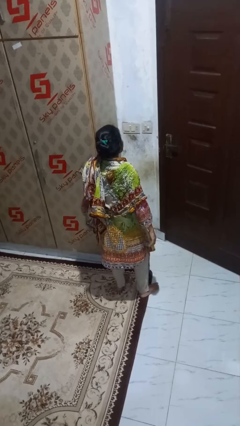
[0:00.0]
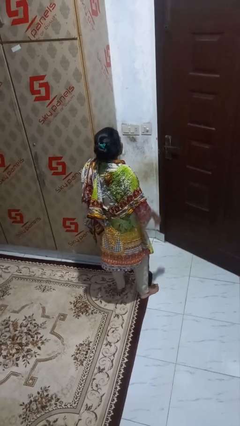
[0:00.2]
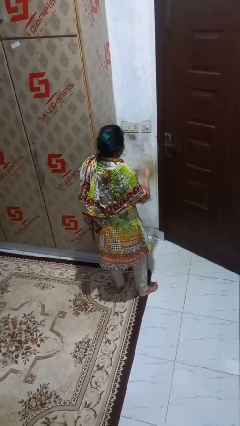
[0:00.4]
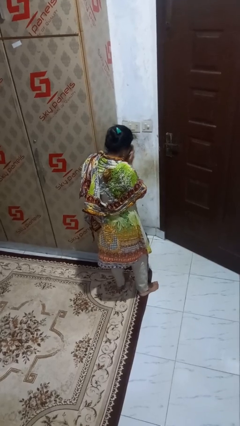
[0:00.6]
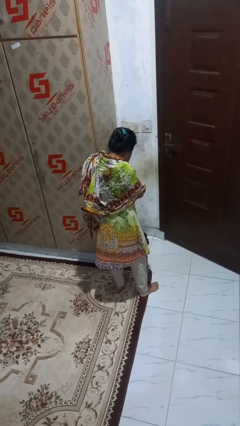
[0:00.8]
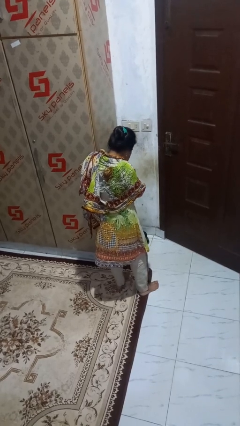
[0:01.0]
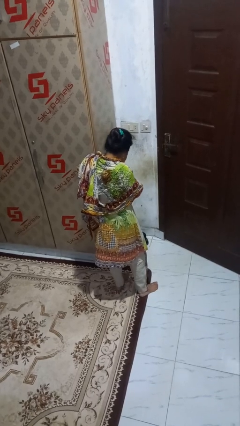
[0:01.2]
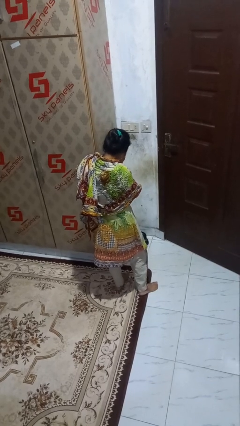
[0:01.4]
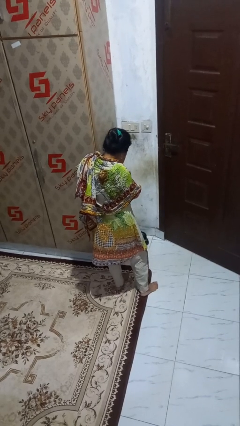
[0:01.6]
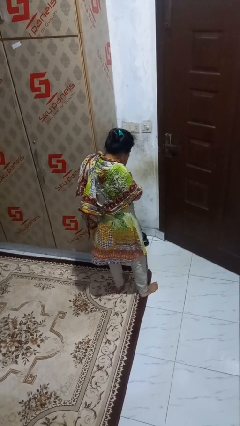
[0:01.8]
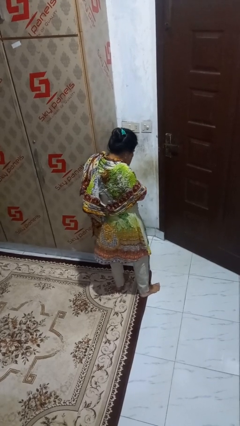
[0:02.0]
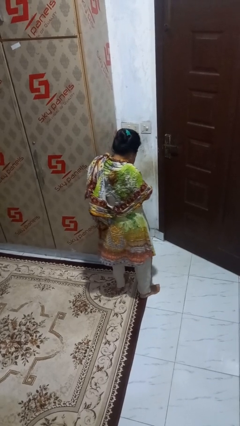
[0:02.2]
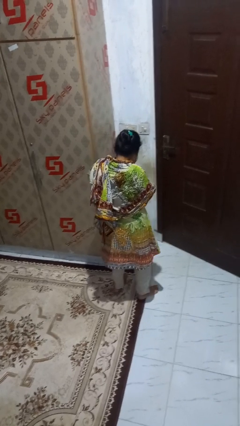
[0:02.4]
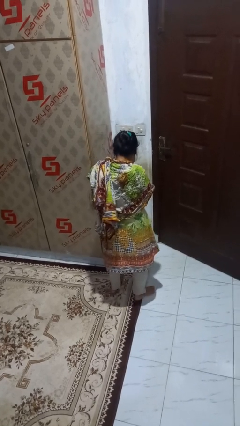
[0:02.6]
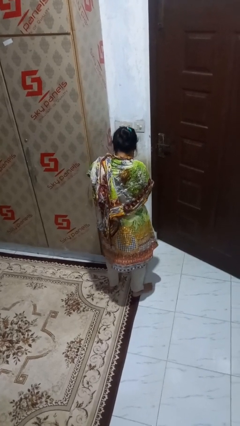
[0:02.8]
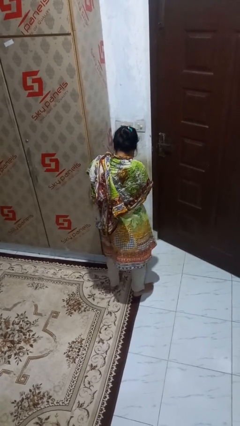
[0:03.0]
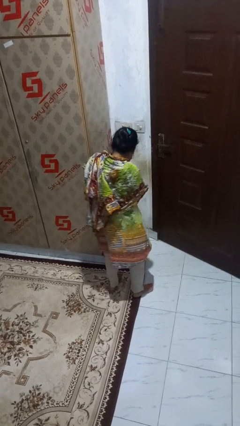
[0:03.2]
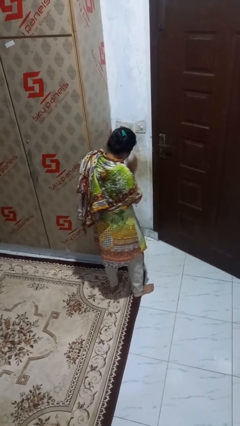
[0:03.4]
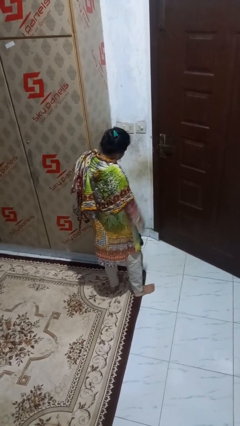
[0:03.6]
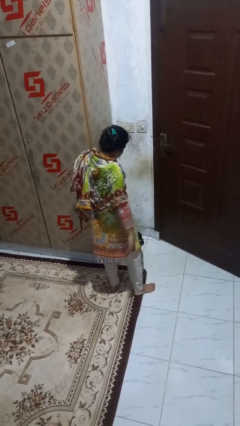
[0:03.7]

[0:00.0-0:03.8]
person sneezes into hand

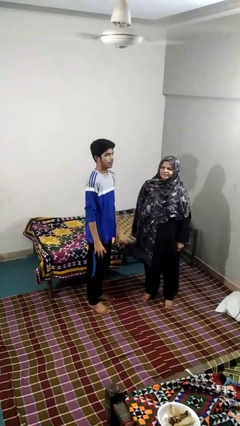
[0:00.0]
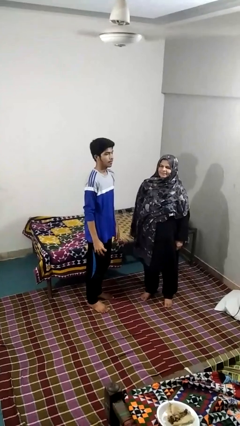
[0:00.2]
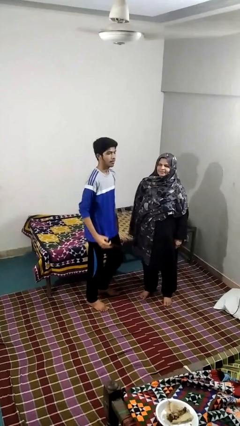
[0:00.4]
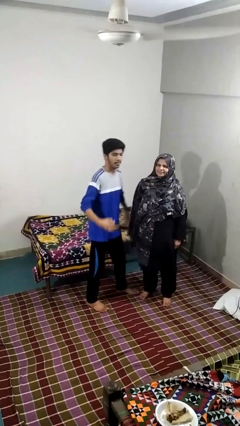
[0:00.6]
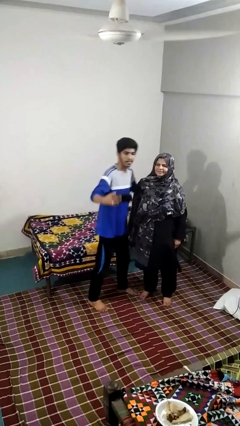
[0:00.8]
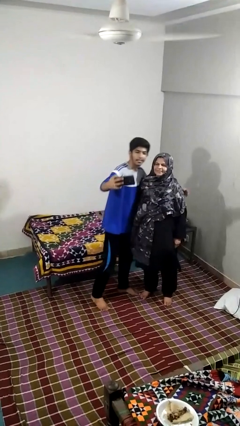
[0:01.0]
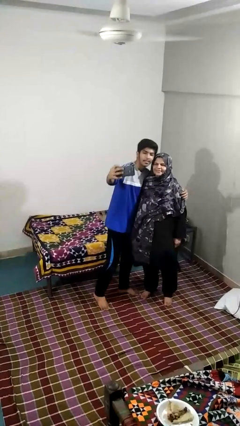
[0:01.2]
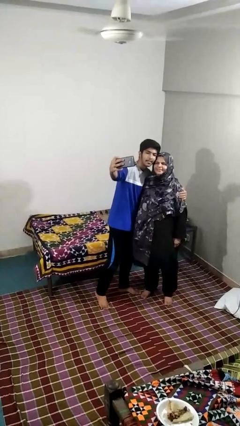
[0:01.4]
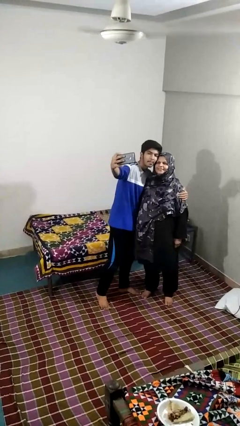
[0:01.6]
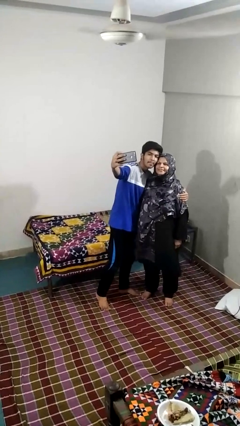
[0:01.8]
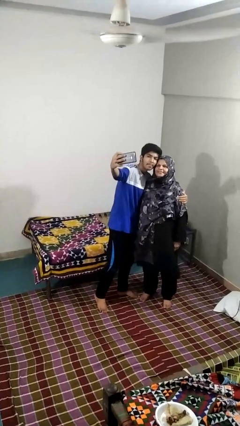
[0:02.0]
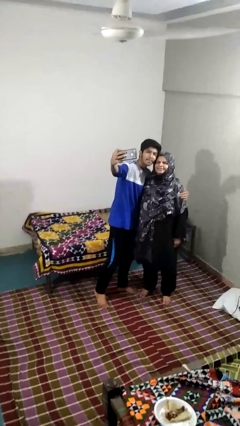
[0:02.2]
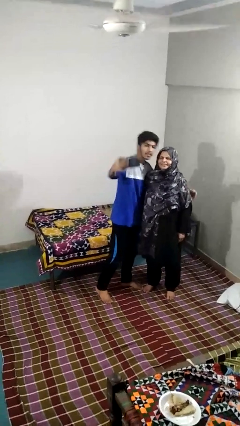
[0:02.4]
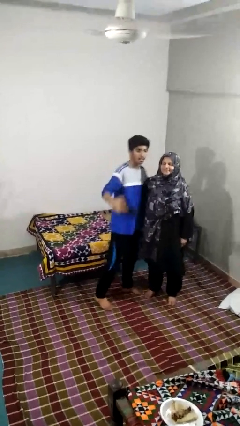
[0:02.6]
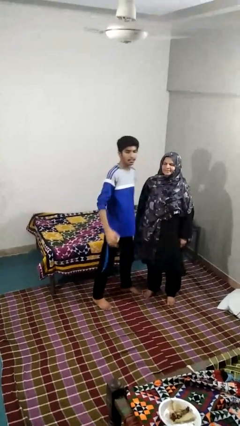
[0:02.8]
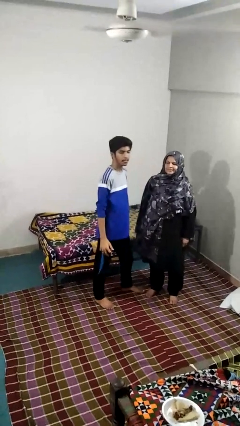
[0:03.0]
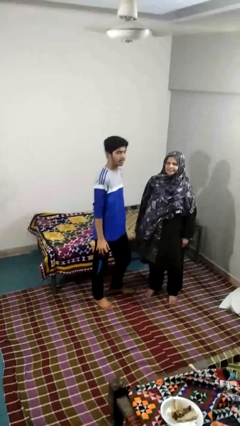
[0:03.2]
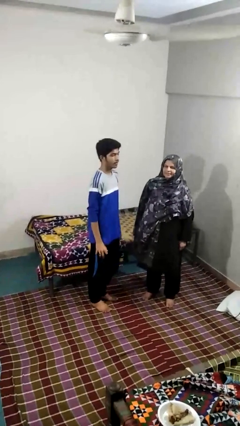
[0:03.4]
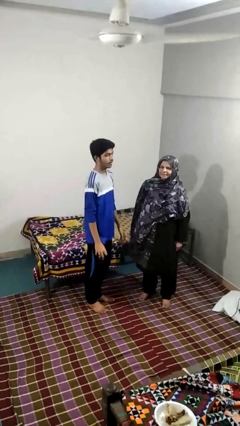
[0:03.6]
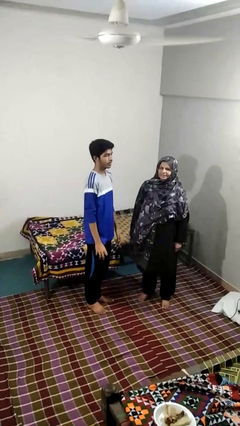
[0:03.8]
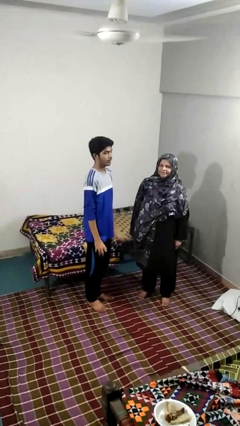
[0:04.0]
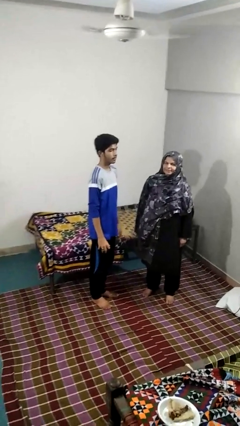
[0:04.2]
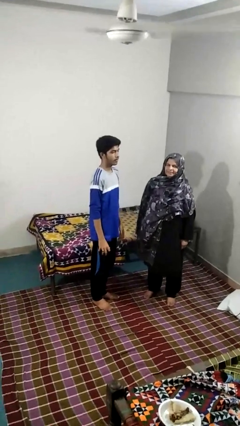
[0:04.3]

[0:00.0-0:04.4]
person takes selfie with person

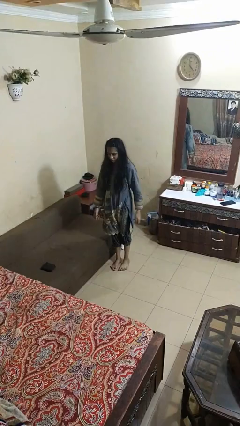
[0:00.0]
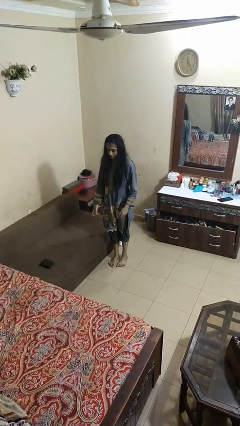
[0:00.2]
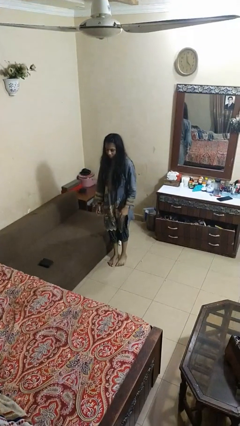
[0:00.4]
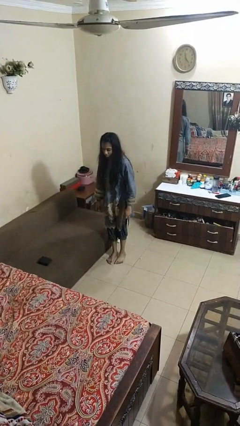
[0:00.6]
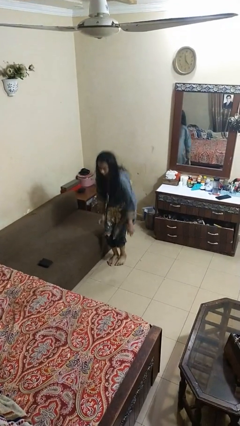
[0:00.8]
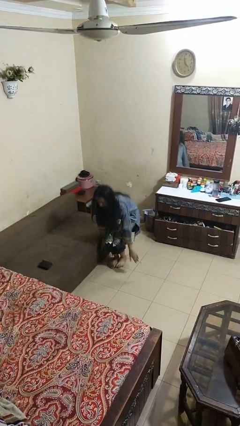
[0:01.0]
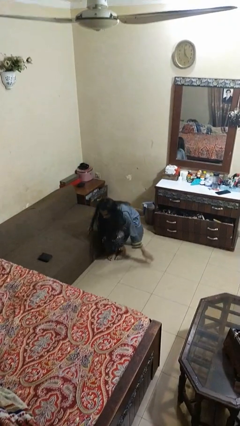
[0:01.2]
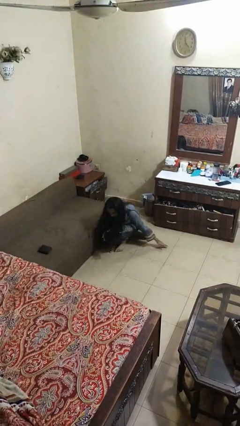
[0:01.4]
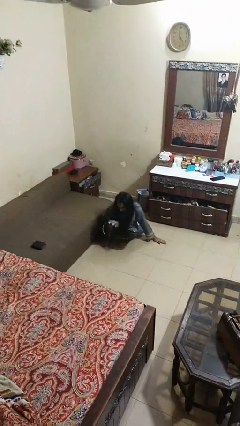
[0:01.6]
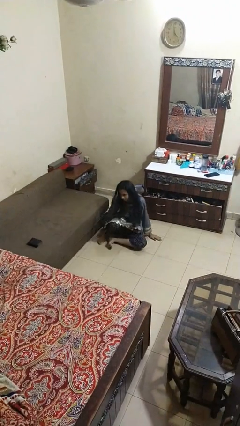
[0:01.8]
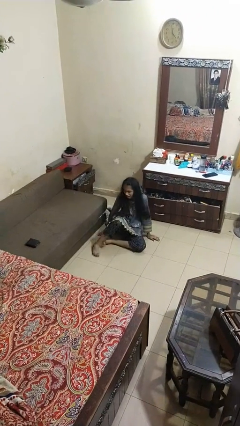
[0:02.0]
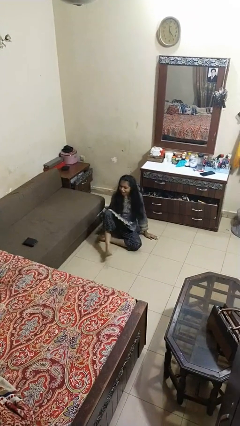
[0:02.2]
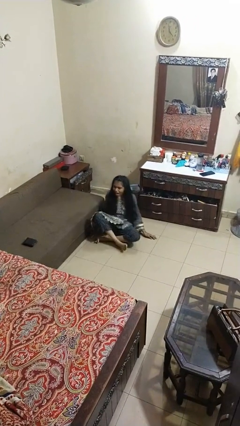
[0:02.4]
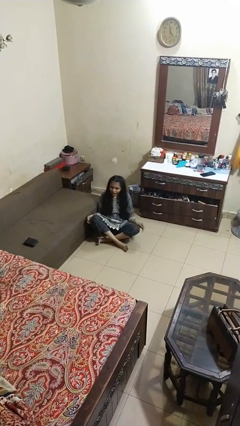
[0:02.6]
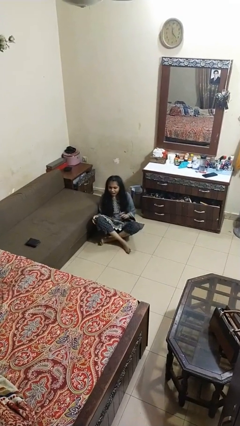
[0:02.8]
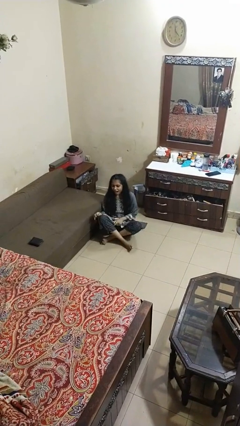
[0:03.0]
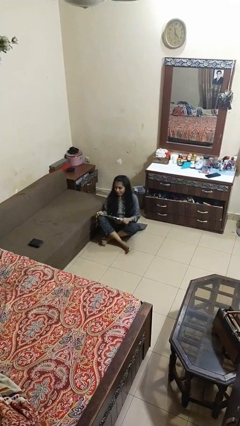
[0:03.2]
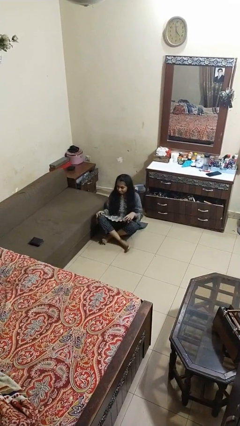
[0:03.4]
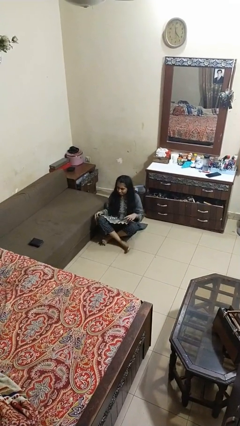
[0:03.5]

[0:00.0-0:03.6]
person sits crisscross

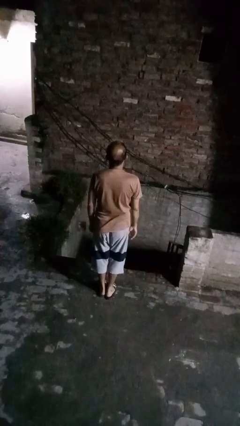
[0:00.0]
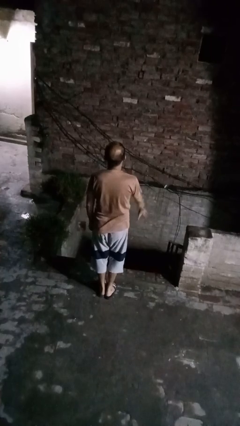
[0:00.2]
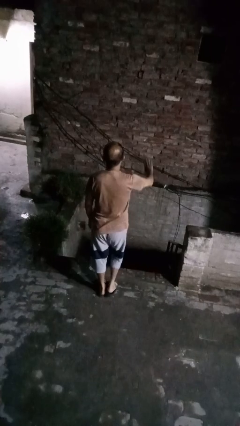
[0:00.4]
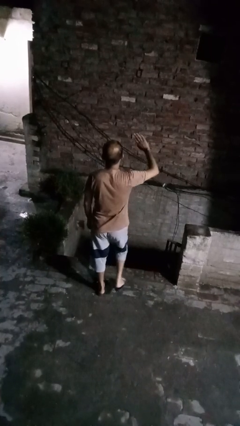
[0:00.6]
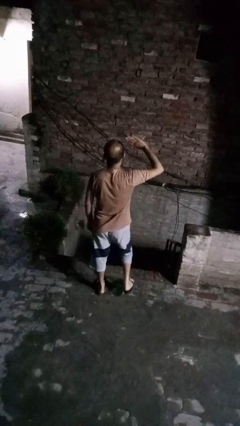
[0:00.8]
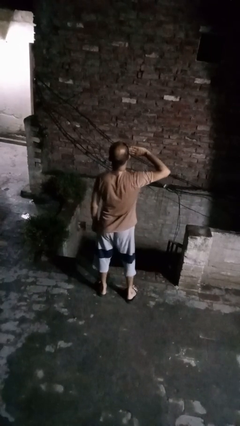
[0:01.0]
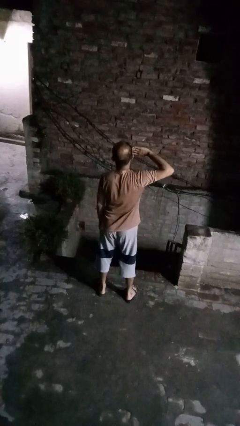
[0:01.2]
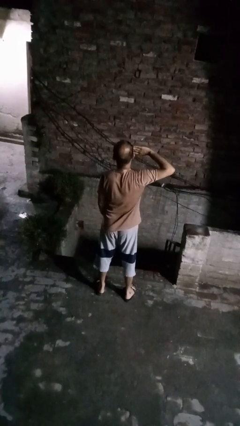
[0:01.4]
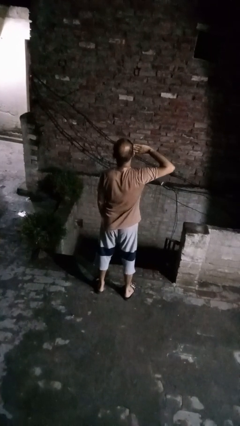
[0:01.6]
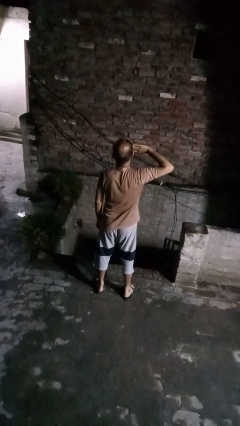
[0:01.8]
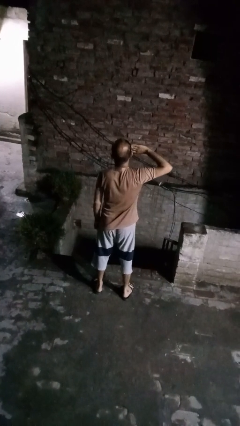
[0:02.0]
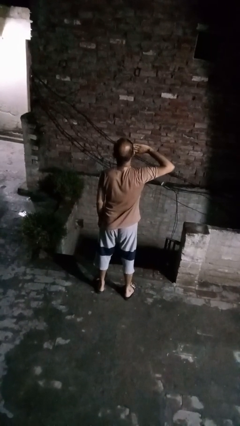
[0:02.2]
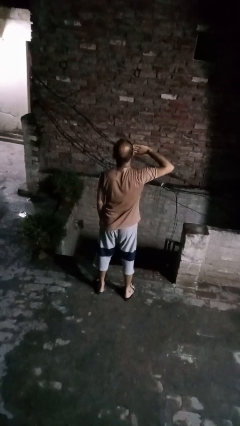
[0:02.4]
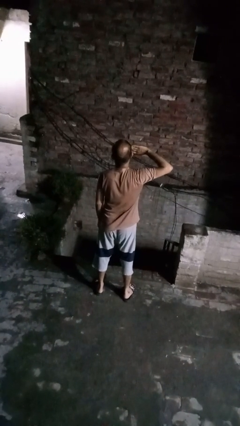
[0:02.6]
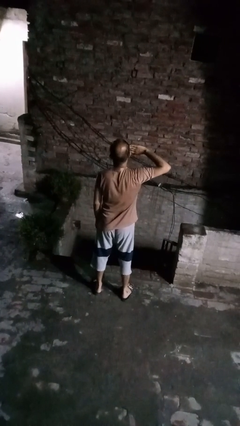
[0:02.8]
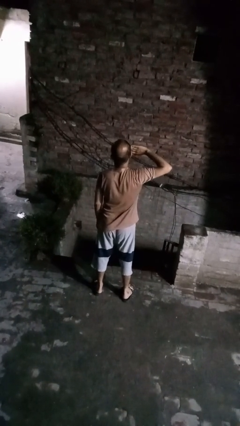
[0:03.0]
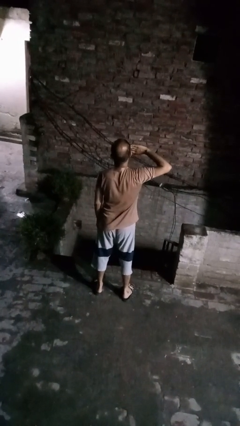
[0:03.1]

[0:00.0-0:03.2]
person salutes

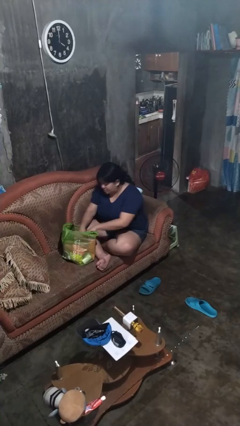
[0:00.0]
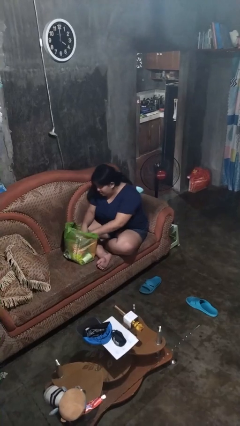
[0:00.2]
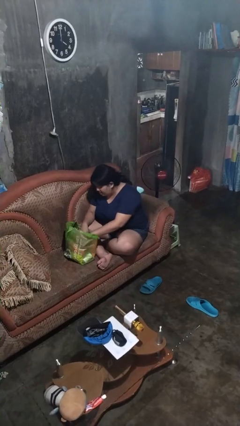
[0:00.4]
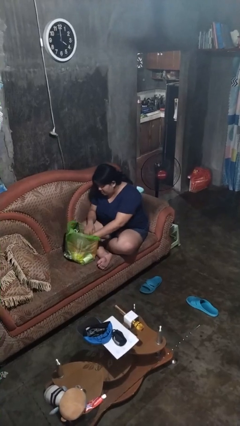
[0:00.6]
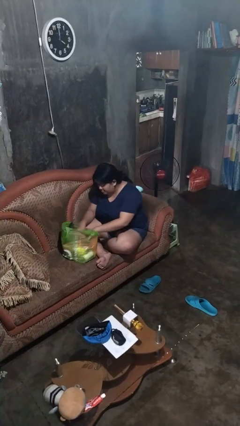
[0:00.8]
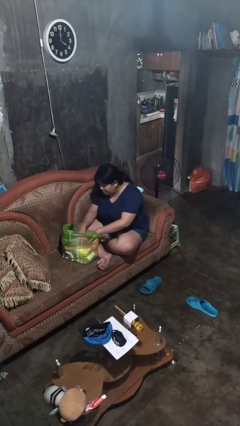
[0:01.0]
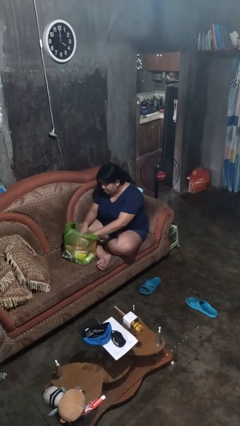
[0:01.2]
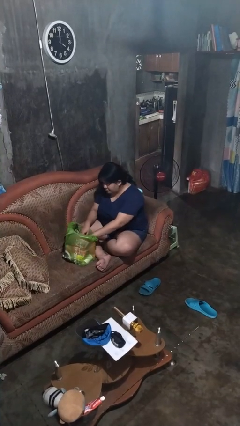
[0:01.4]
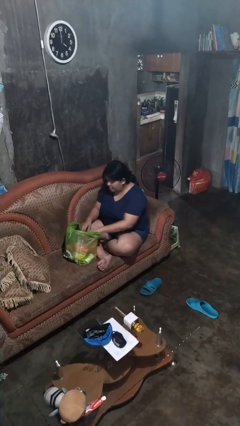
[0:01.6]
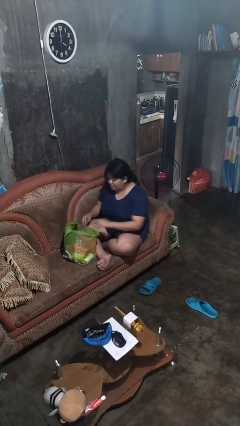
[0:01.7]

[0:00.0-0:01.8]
person searches in bag

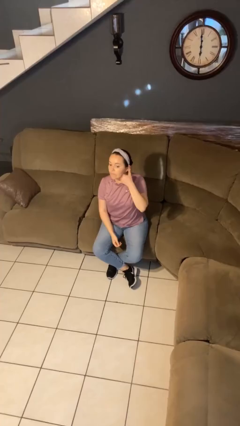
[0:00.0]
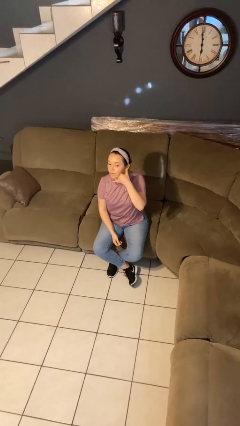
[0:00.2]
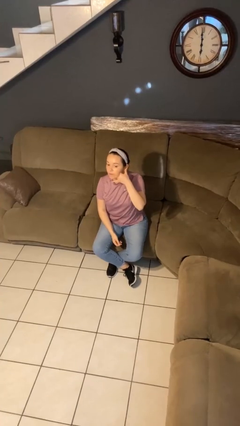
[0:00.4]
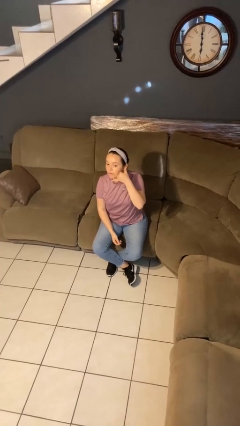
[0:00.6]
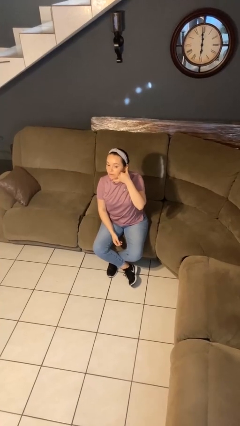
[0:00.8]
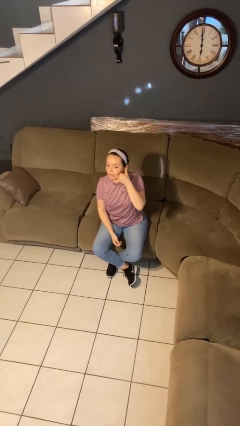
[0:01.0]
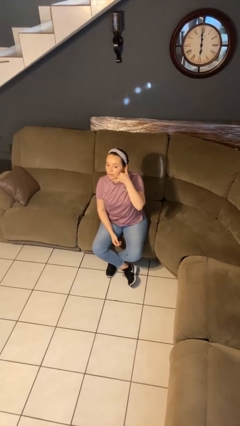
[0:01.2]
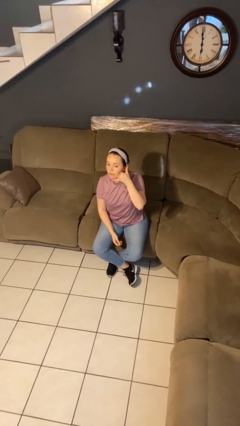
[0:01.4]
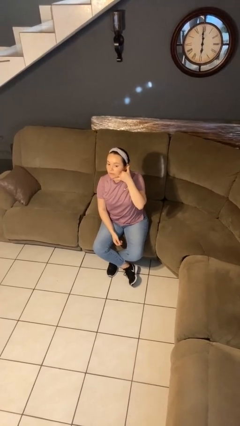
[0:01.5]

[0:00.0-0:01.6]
person gestures call me
